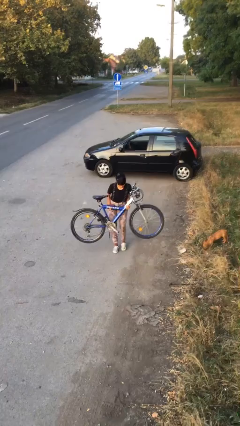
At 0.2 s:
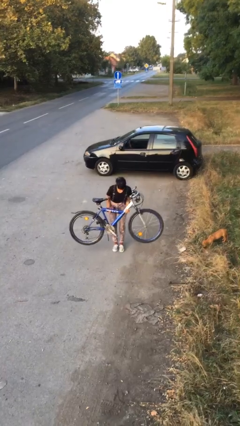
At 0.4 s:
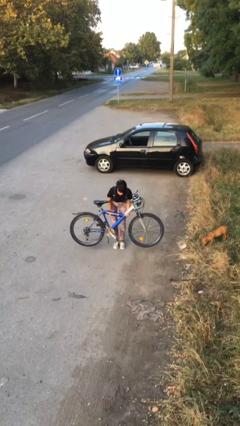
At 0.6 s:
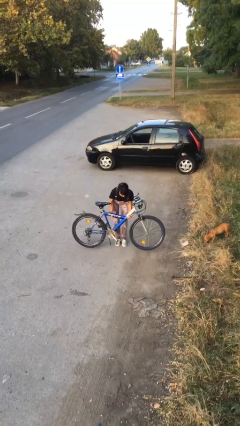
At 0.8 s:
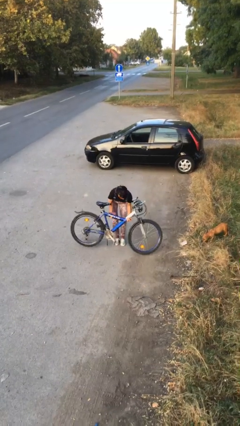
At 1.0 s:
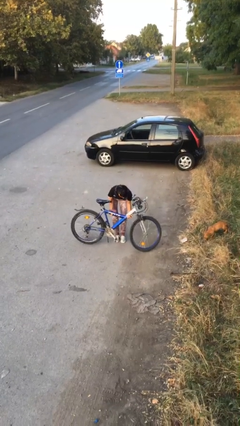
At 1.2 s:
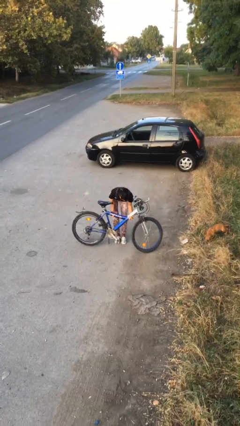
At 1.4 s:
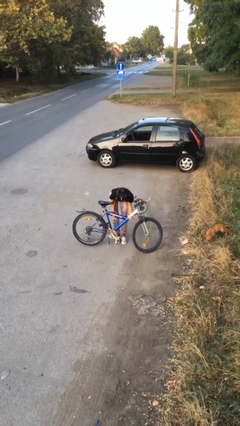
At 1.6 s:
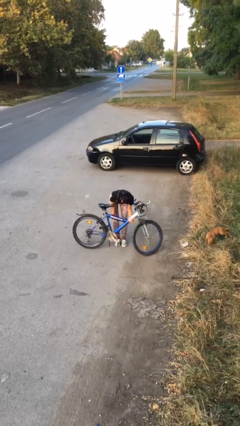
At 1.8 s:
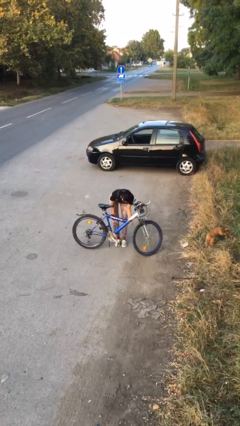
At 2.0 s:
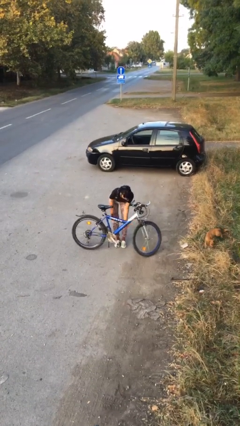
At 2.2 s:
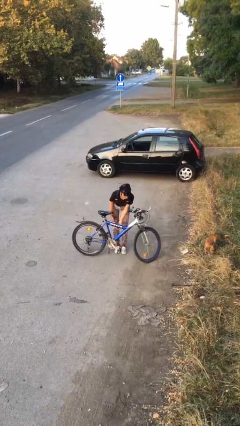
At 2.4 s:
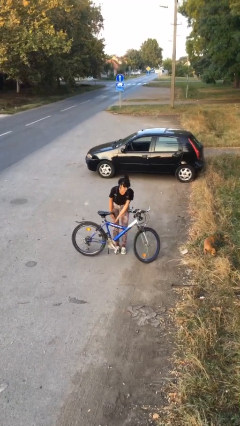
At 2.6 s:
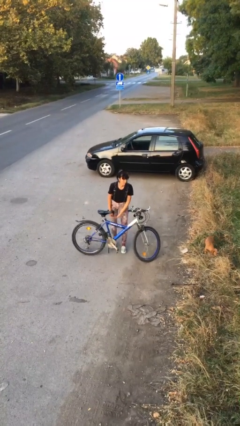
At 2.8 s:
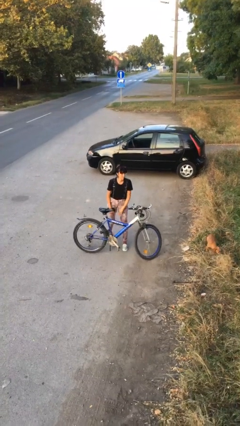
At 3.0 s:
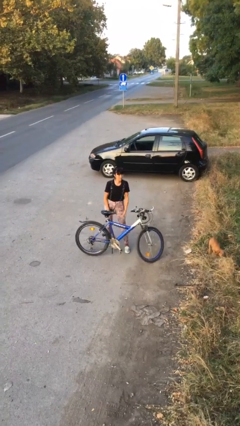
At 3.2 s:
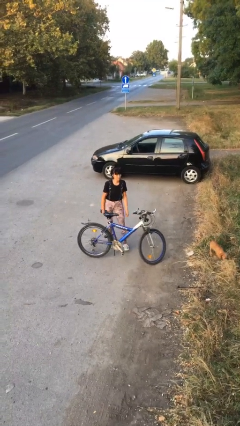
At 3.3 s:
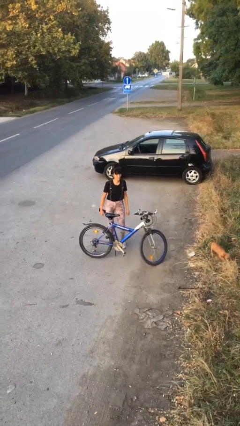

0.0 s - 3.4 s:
person puts down object on floor

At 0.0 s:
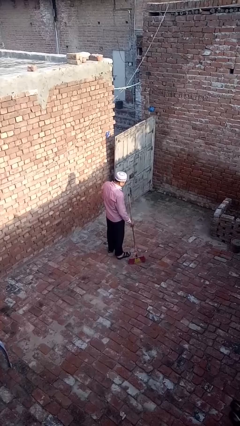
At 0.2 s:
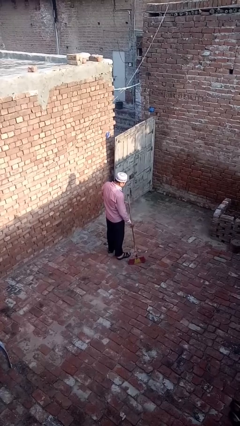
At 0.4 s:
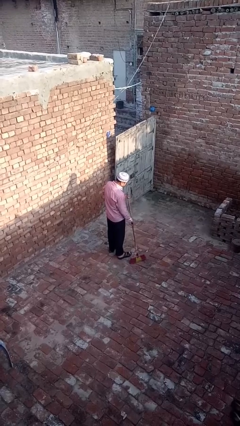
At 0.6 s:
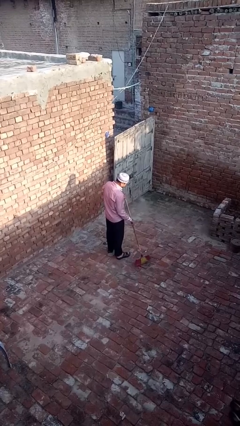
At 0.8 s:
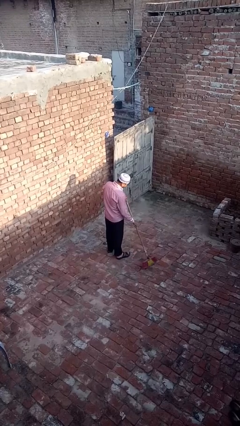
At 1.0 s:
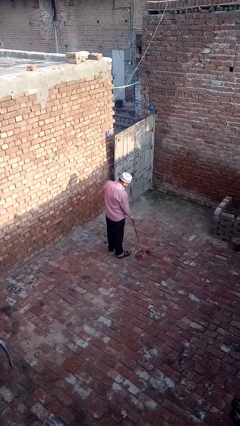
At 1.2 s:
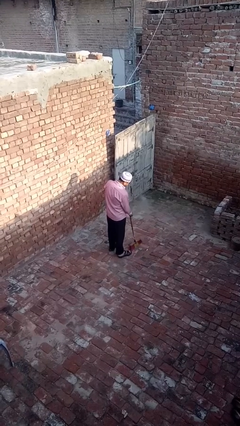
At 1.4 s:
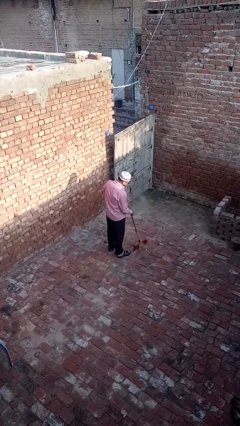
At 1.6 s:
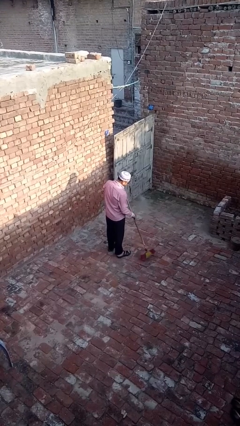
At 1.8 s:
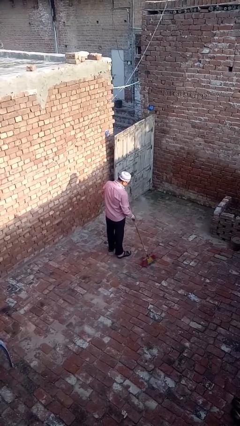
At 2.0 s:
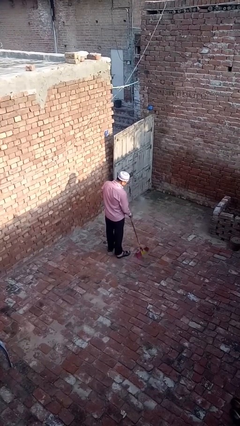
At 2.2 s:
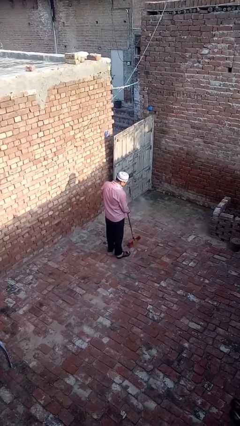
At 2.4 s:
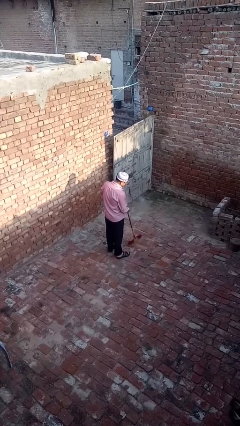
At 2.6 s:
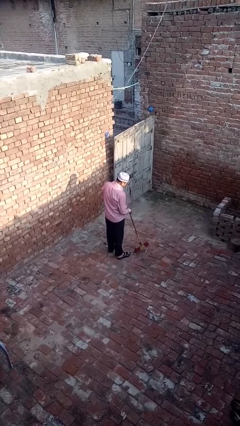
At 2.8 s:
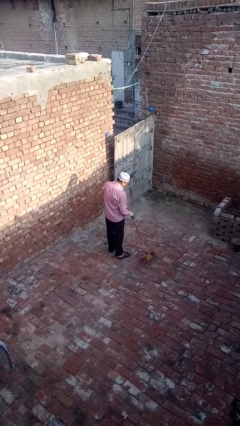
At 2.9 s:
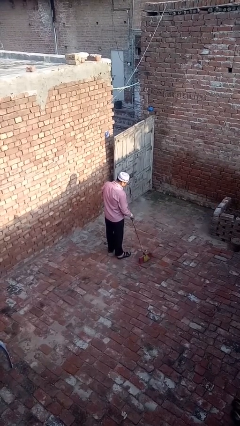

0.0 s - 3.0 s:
person sweeps floor

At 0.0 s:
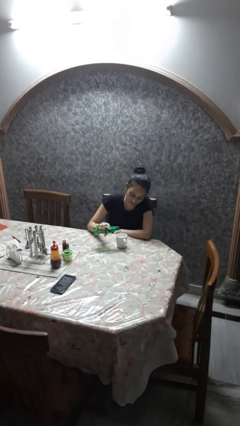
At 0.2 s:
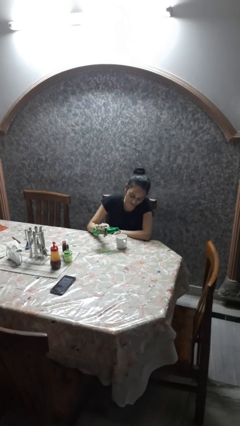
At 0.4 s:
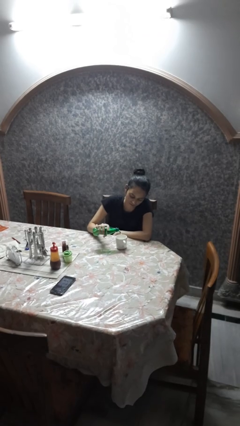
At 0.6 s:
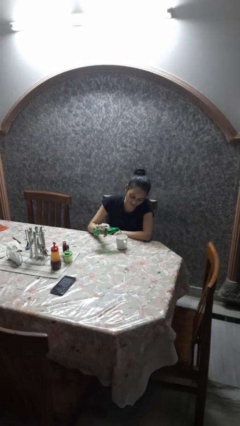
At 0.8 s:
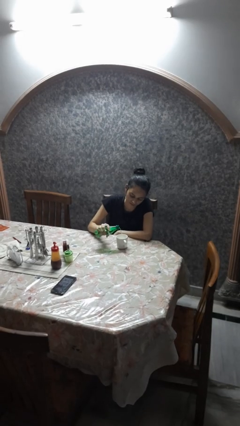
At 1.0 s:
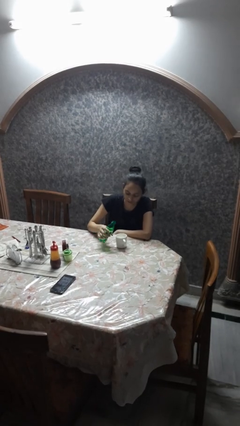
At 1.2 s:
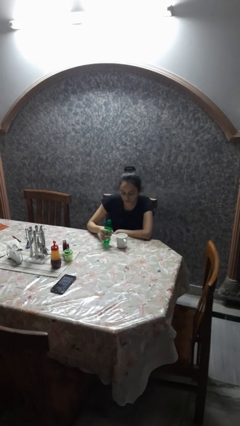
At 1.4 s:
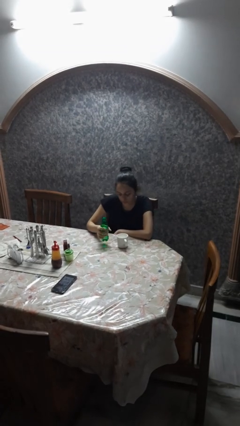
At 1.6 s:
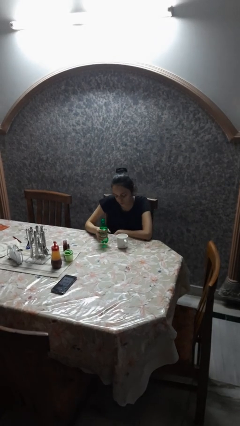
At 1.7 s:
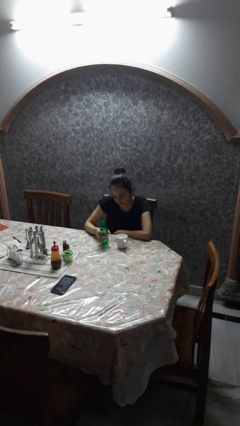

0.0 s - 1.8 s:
person pours liquid into cup

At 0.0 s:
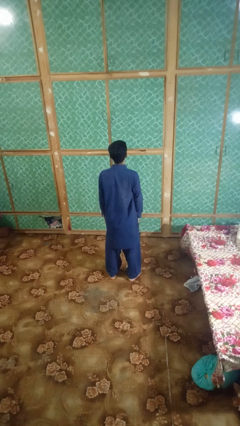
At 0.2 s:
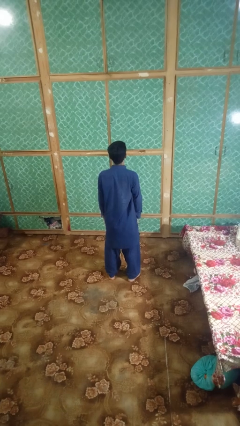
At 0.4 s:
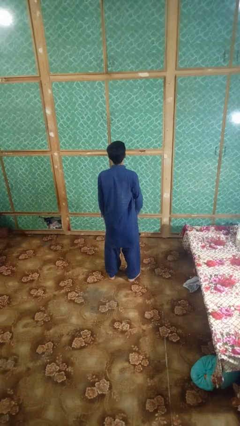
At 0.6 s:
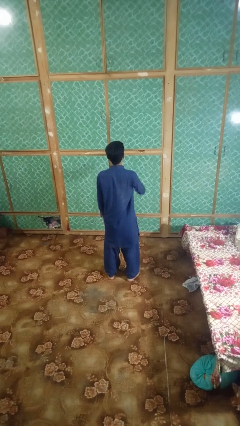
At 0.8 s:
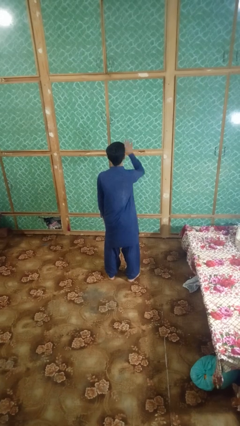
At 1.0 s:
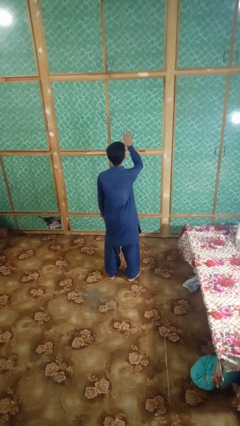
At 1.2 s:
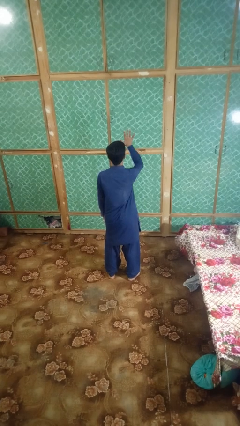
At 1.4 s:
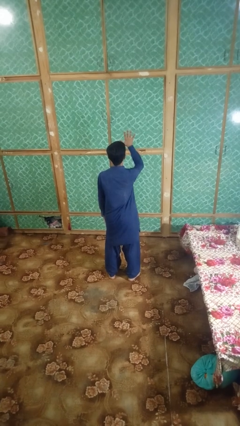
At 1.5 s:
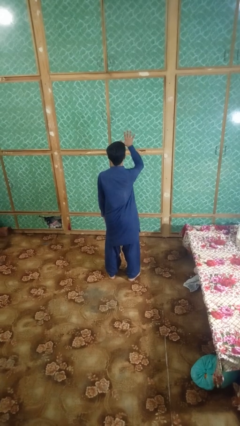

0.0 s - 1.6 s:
person gestures number five

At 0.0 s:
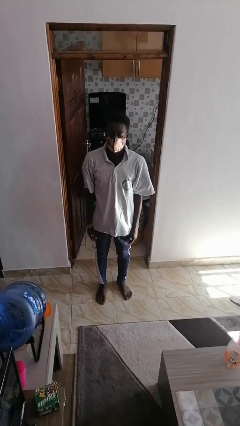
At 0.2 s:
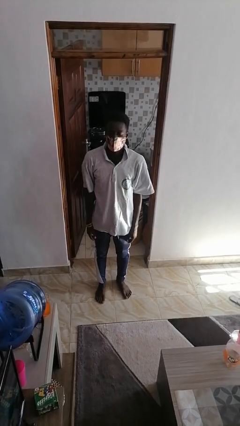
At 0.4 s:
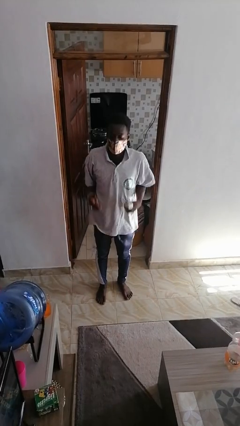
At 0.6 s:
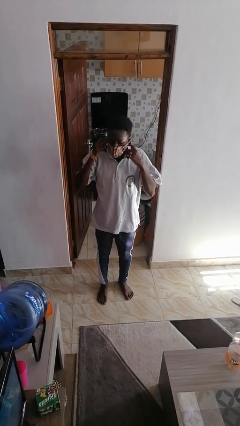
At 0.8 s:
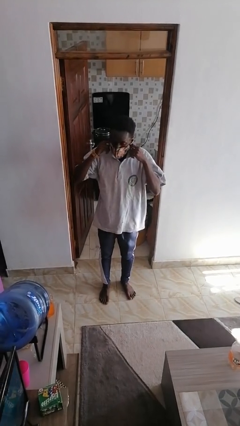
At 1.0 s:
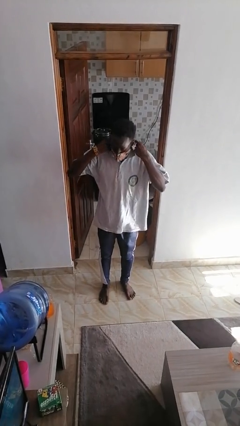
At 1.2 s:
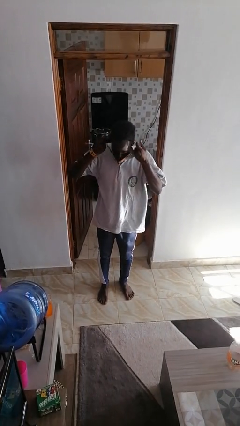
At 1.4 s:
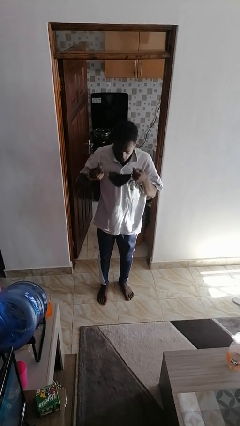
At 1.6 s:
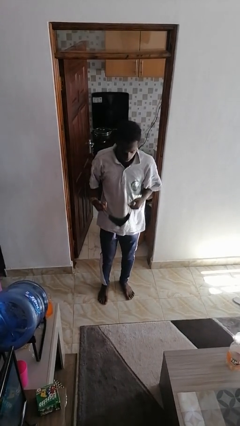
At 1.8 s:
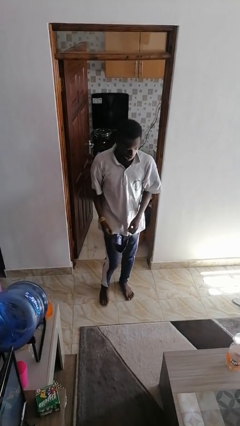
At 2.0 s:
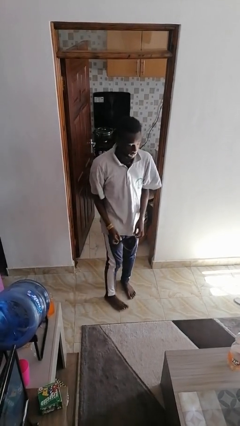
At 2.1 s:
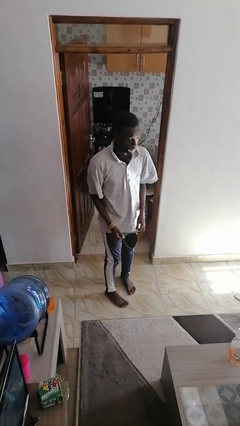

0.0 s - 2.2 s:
person takes off facemask

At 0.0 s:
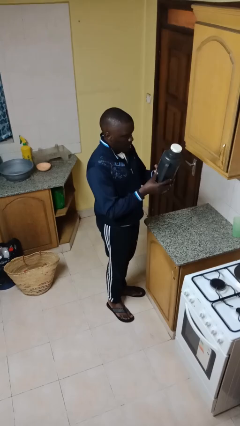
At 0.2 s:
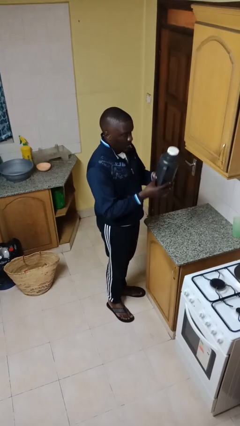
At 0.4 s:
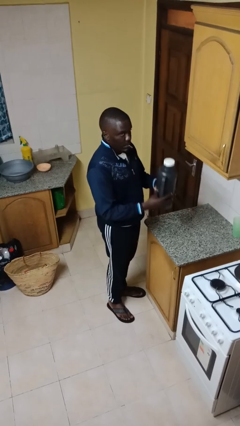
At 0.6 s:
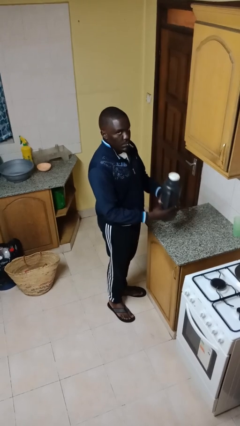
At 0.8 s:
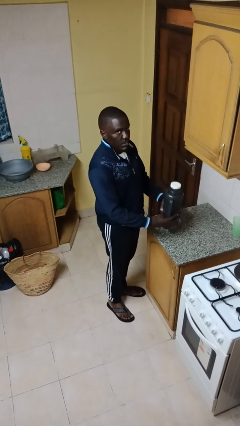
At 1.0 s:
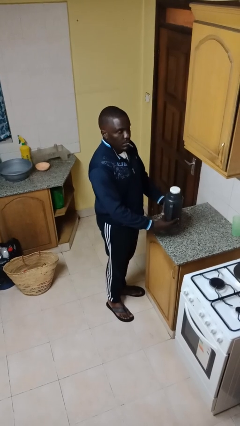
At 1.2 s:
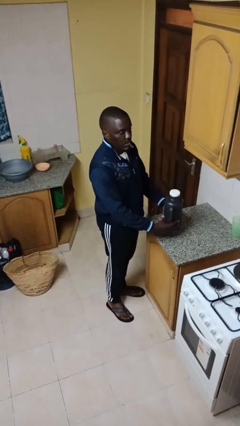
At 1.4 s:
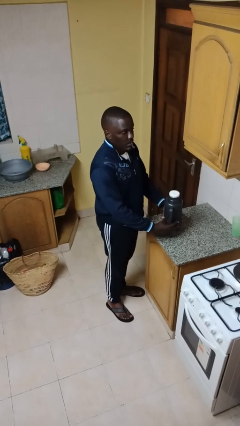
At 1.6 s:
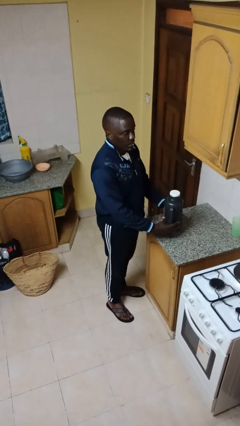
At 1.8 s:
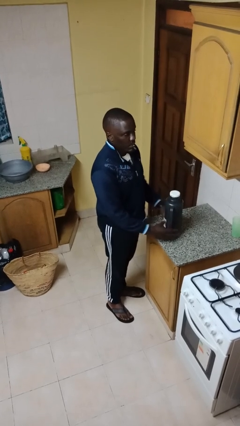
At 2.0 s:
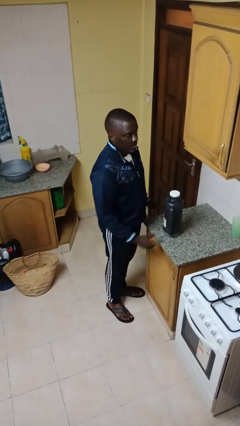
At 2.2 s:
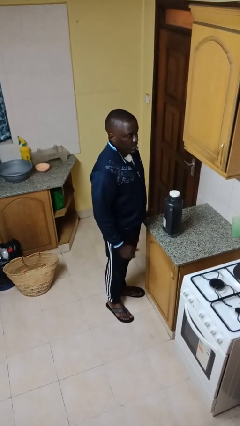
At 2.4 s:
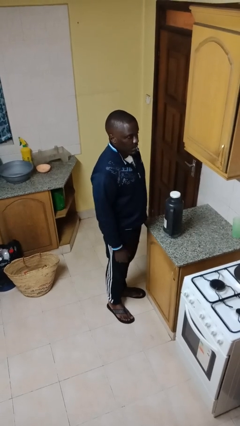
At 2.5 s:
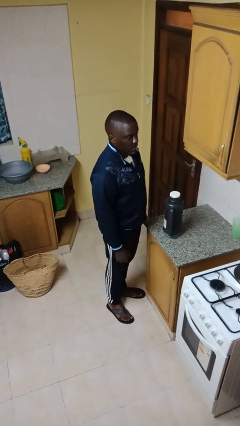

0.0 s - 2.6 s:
person puts down object on countertop

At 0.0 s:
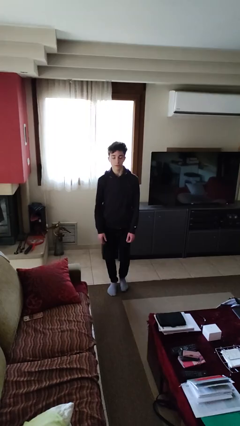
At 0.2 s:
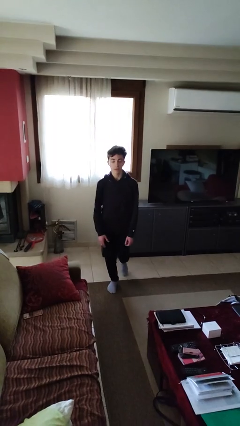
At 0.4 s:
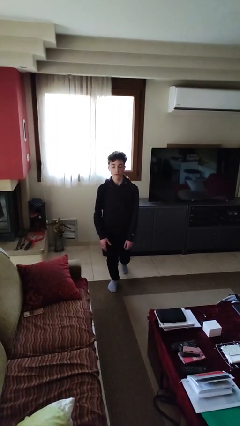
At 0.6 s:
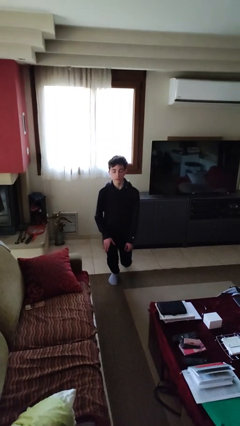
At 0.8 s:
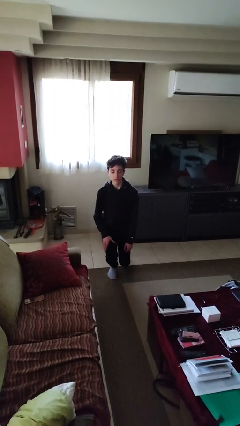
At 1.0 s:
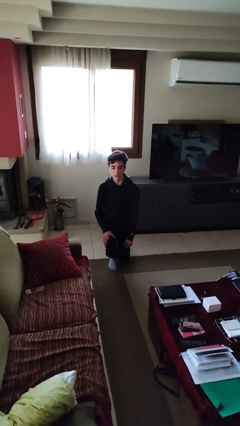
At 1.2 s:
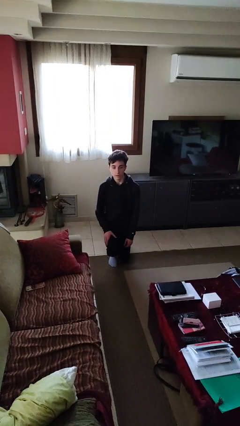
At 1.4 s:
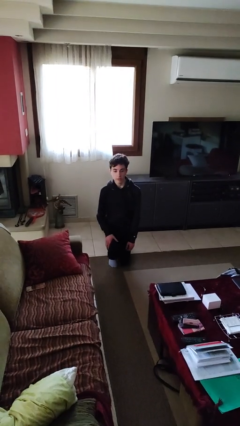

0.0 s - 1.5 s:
person kneels

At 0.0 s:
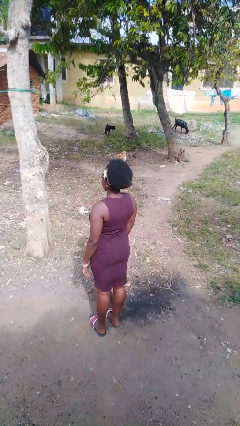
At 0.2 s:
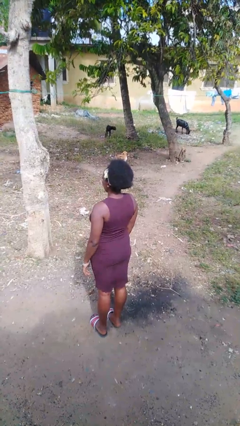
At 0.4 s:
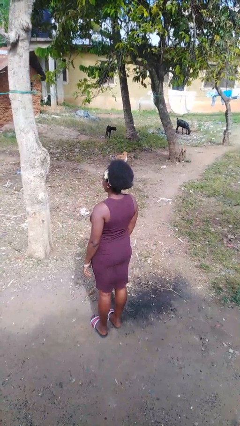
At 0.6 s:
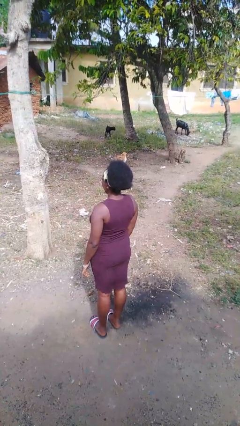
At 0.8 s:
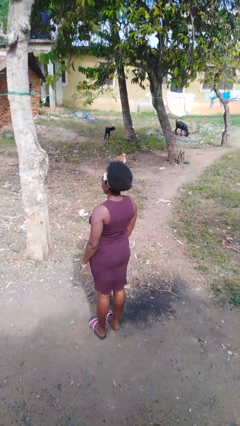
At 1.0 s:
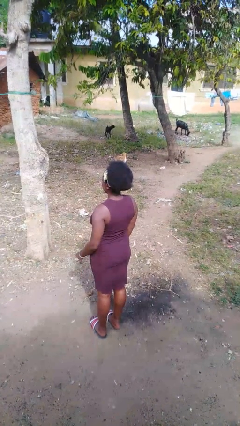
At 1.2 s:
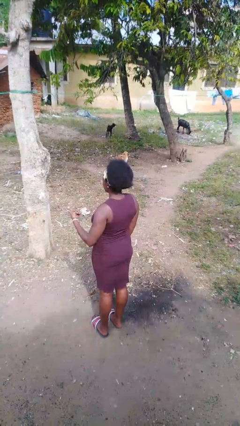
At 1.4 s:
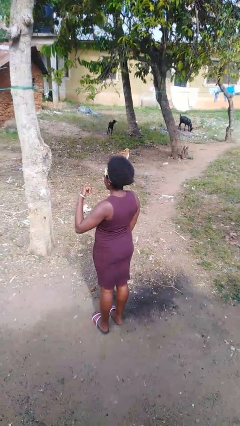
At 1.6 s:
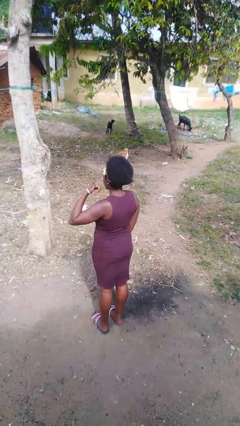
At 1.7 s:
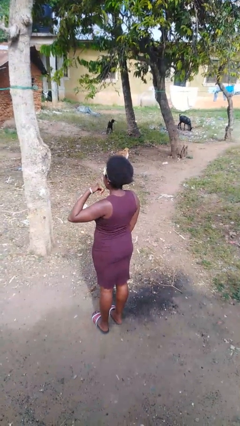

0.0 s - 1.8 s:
person gestures call me
